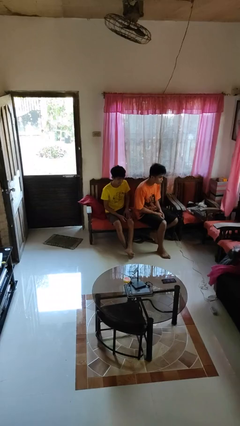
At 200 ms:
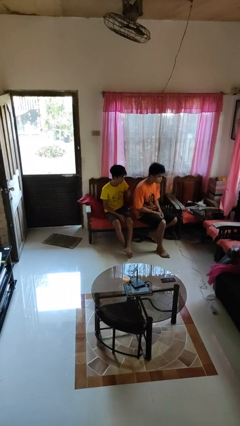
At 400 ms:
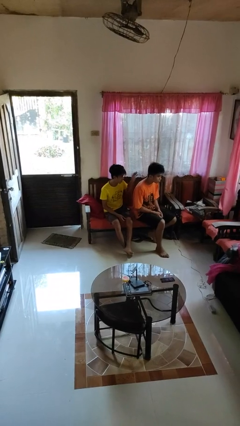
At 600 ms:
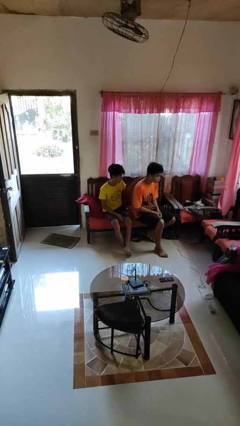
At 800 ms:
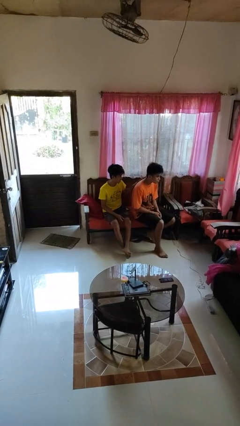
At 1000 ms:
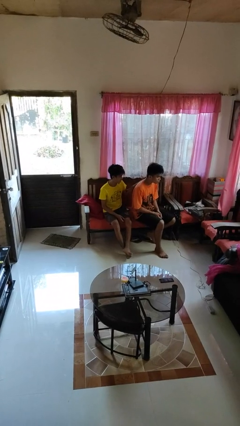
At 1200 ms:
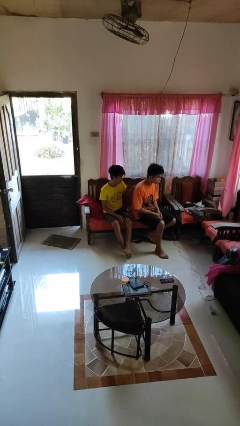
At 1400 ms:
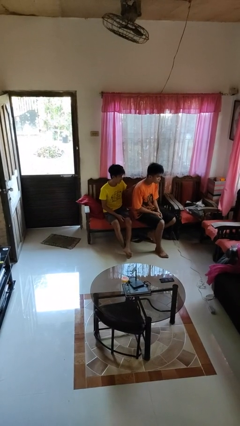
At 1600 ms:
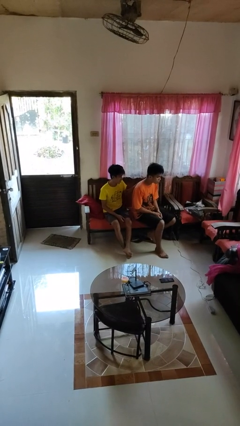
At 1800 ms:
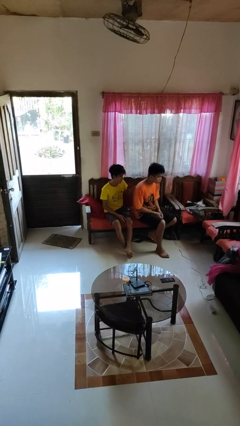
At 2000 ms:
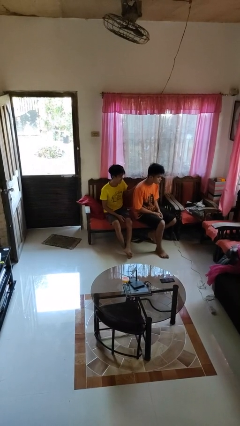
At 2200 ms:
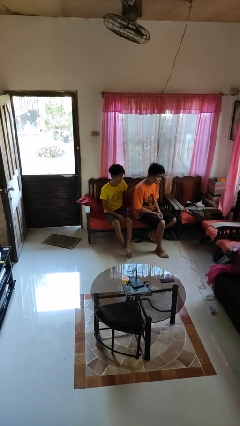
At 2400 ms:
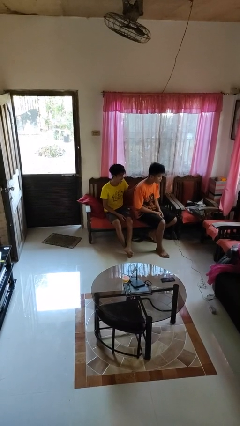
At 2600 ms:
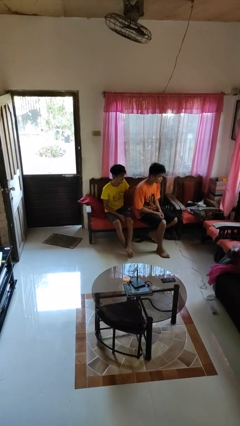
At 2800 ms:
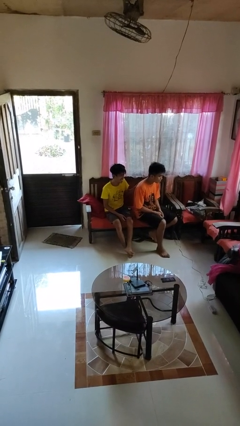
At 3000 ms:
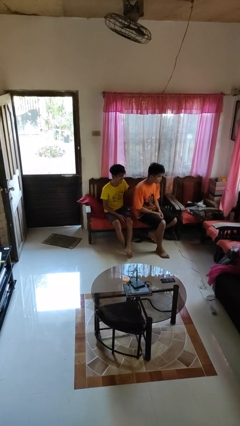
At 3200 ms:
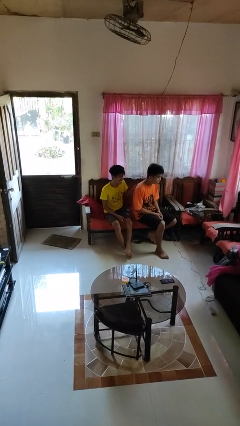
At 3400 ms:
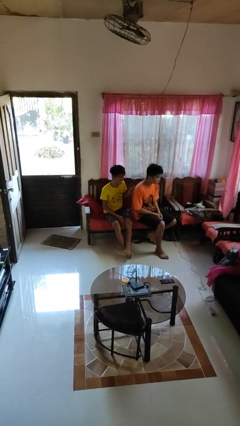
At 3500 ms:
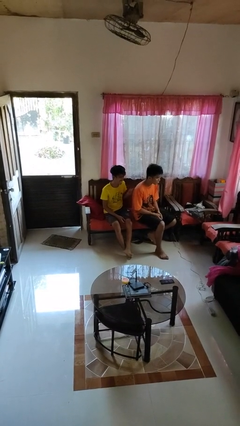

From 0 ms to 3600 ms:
person touches back of person

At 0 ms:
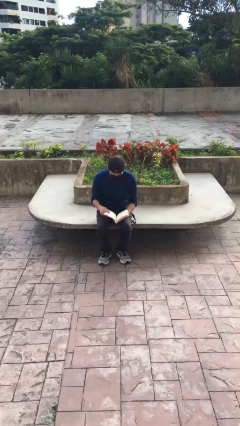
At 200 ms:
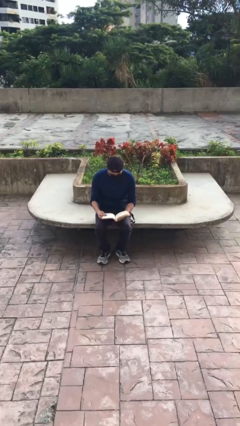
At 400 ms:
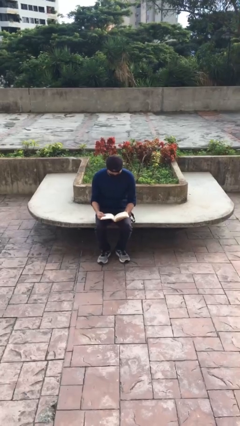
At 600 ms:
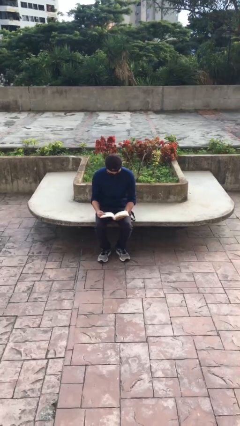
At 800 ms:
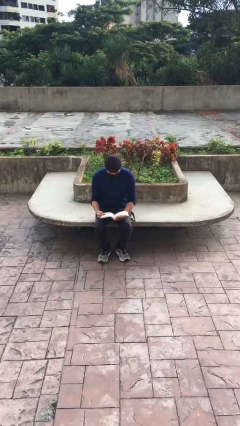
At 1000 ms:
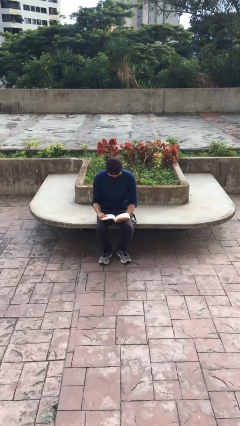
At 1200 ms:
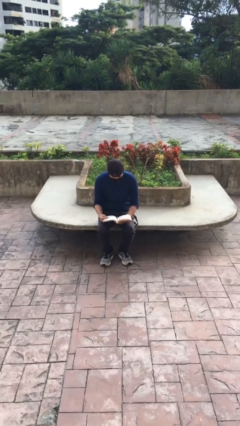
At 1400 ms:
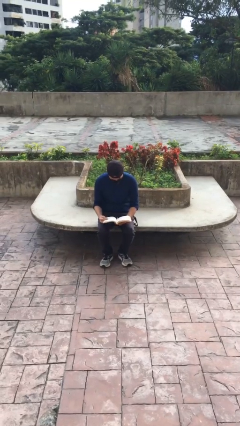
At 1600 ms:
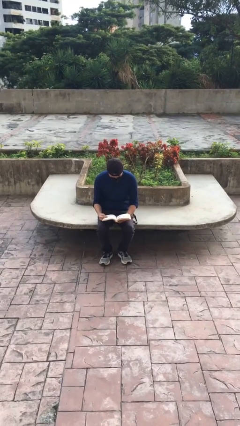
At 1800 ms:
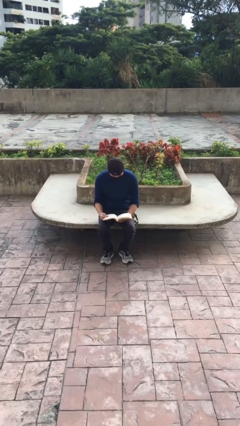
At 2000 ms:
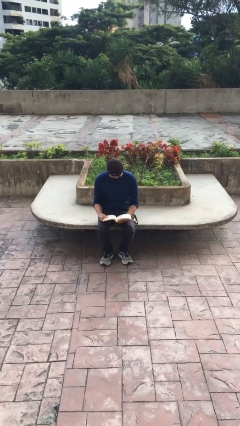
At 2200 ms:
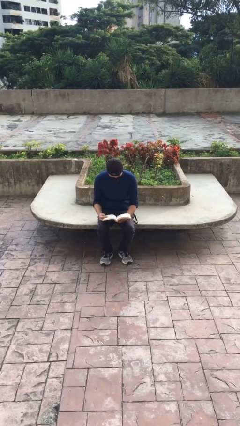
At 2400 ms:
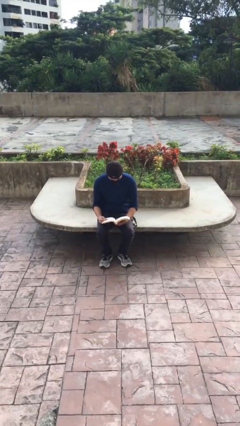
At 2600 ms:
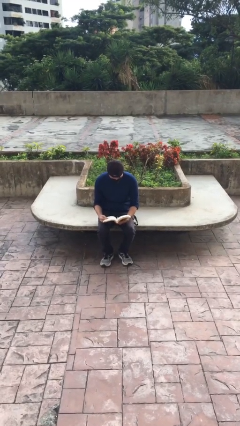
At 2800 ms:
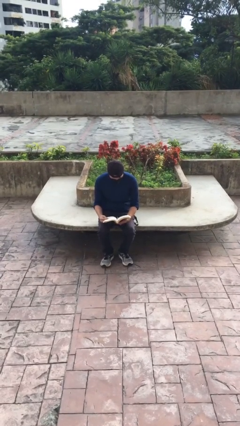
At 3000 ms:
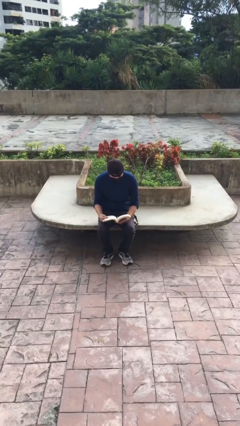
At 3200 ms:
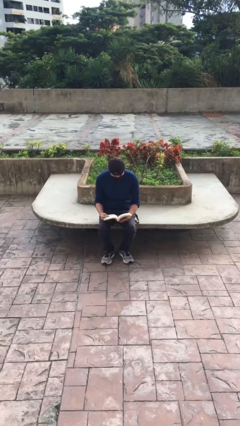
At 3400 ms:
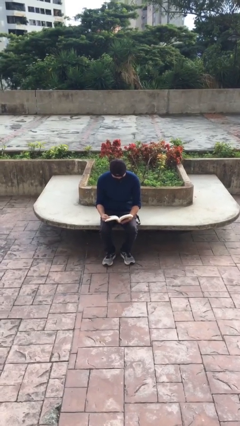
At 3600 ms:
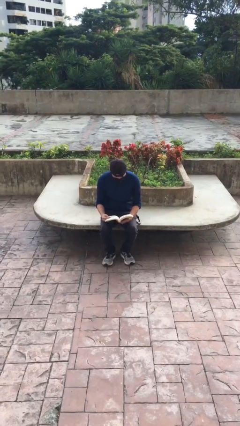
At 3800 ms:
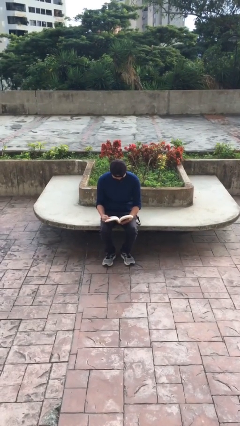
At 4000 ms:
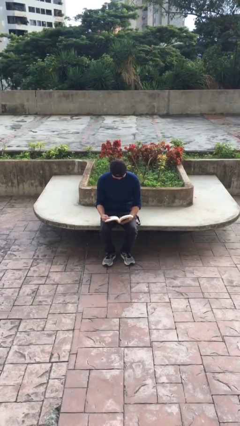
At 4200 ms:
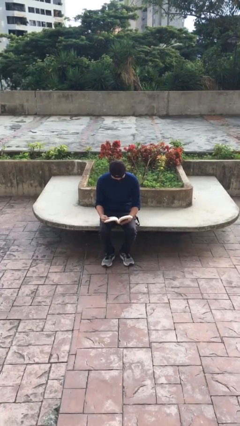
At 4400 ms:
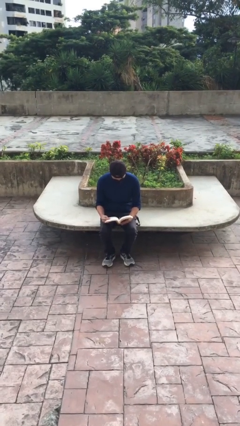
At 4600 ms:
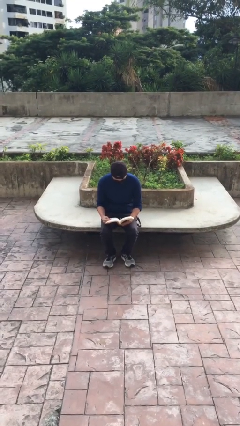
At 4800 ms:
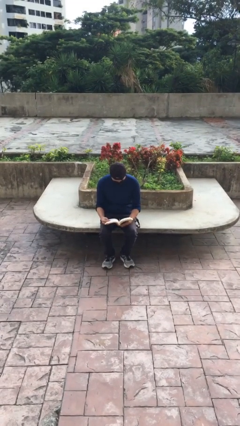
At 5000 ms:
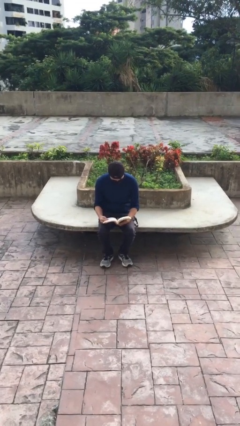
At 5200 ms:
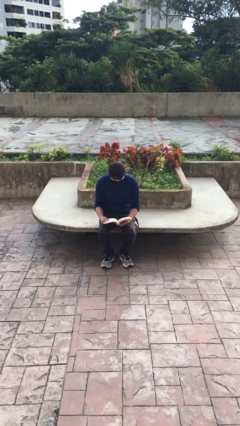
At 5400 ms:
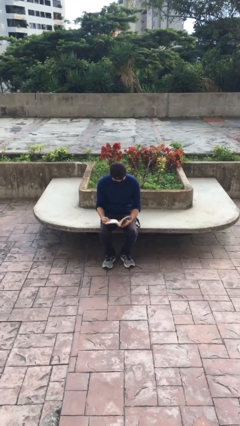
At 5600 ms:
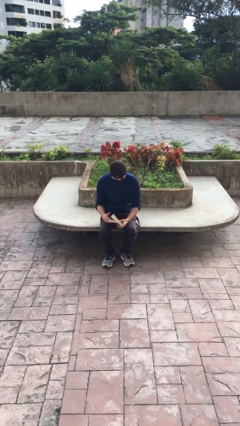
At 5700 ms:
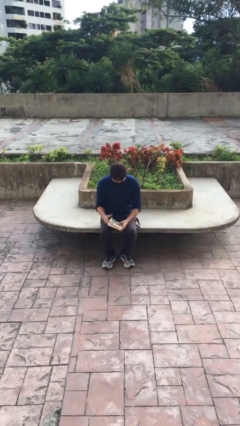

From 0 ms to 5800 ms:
person reads document

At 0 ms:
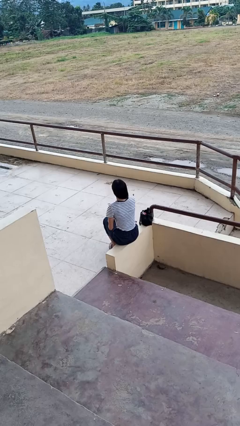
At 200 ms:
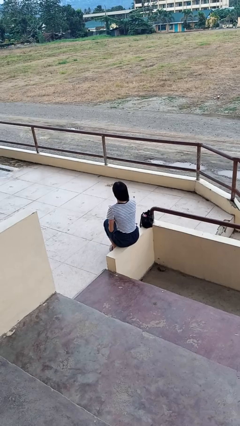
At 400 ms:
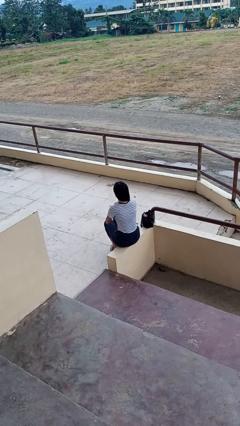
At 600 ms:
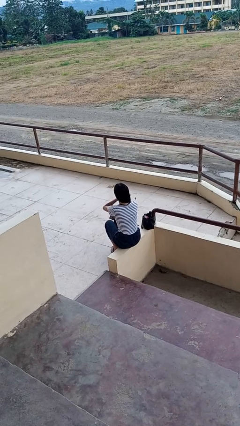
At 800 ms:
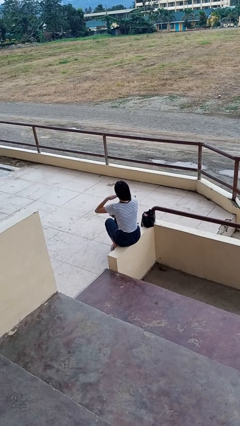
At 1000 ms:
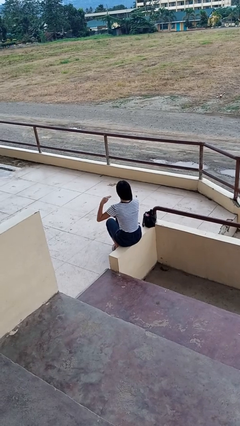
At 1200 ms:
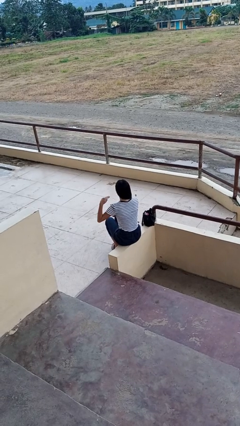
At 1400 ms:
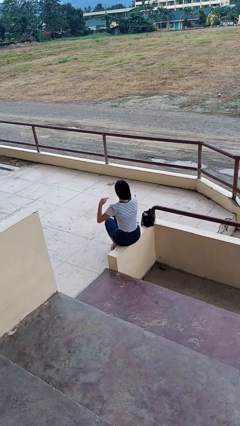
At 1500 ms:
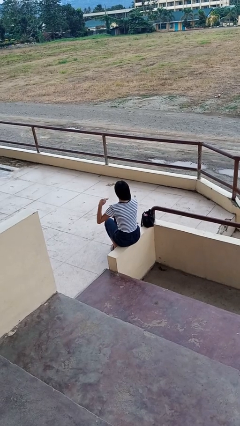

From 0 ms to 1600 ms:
person gestures cut

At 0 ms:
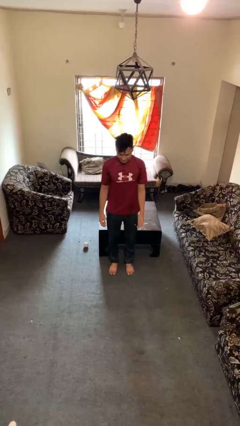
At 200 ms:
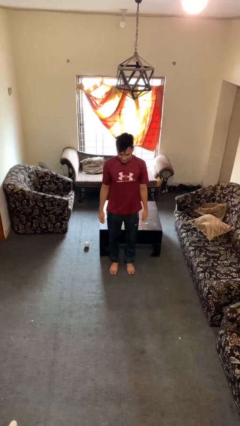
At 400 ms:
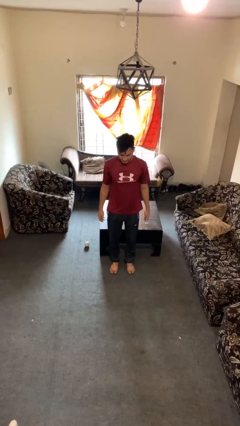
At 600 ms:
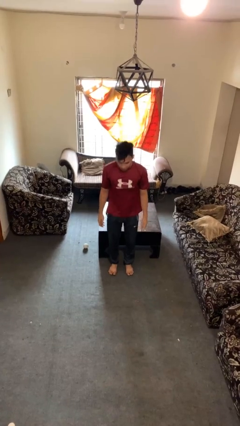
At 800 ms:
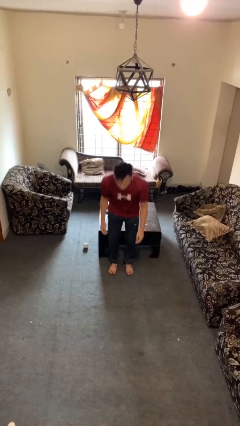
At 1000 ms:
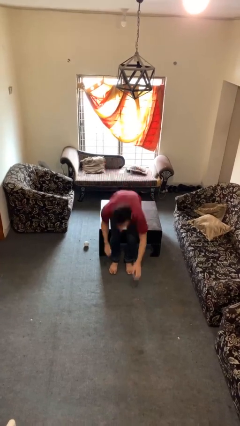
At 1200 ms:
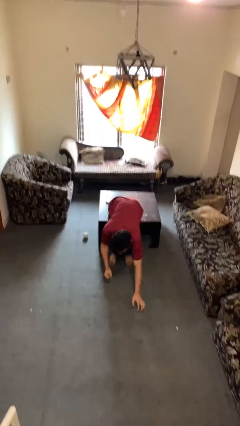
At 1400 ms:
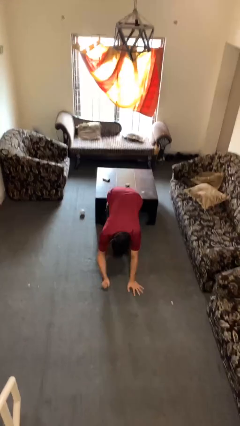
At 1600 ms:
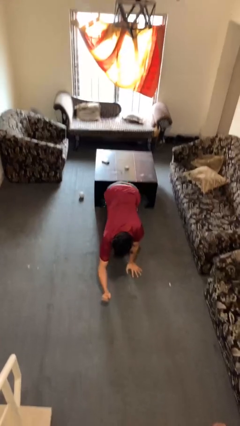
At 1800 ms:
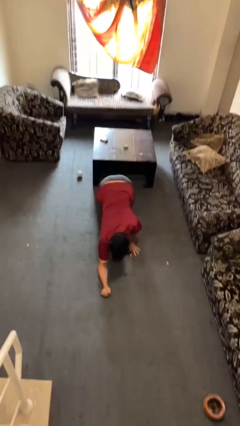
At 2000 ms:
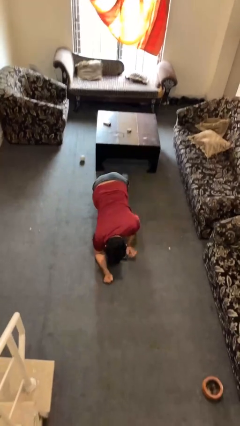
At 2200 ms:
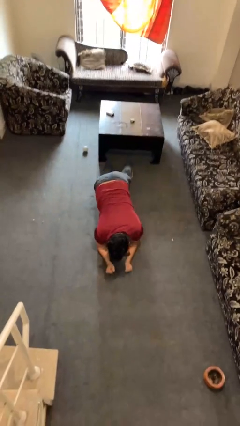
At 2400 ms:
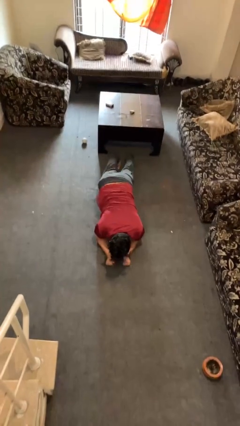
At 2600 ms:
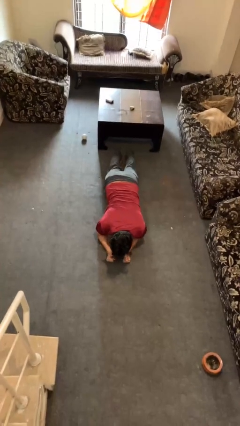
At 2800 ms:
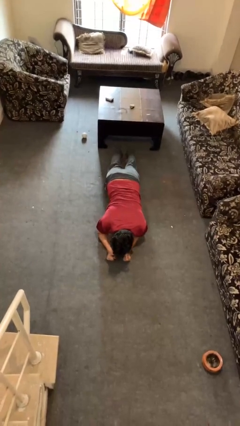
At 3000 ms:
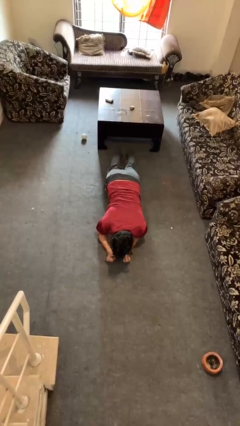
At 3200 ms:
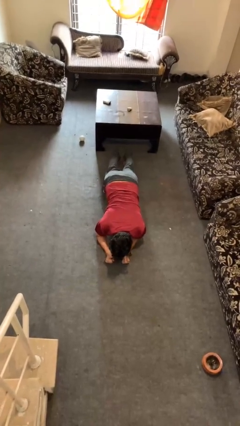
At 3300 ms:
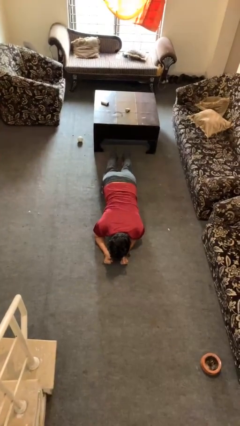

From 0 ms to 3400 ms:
person exercises with plank

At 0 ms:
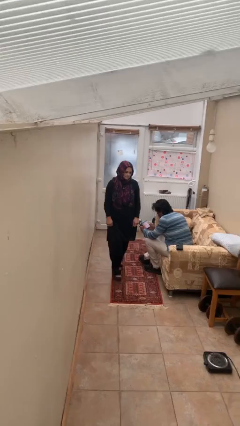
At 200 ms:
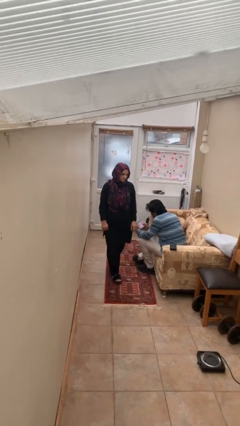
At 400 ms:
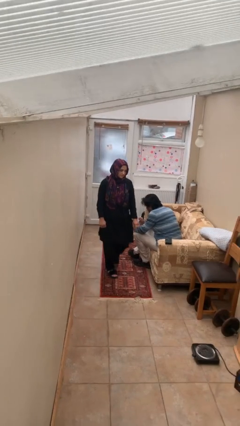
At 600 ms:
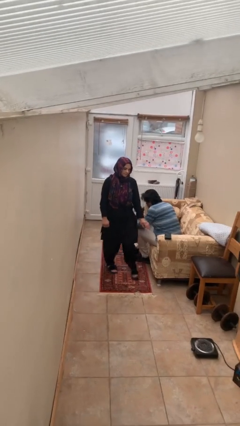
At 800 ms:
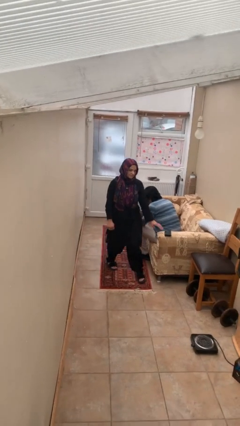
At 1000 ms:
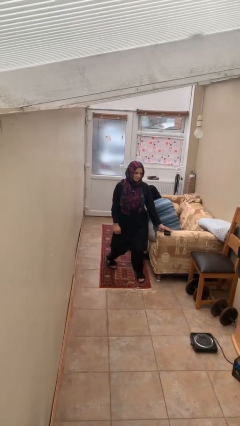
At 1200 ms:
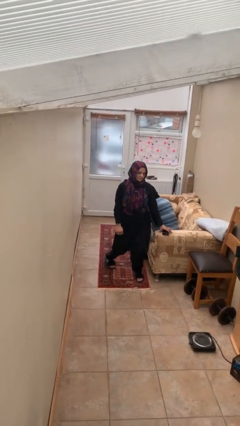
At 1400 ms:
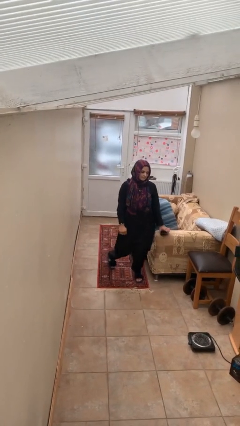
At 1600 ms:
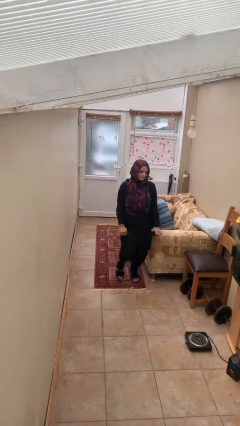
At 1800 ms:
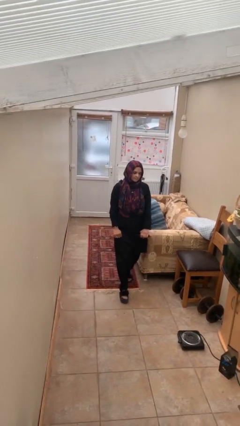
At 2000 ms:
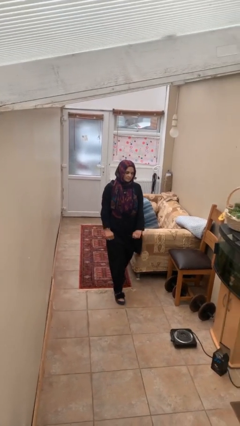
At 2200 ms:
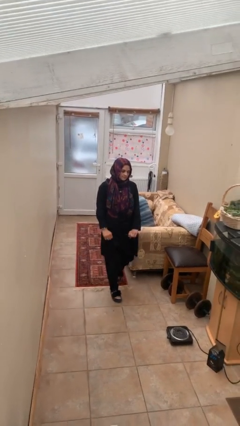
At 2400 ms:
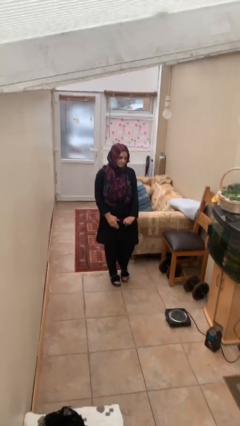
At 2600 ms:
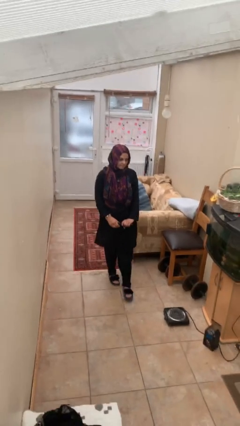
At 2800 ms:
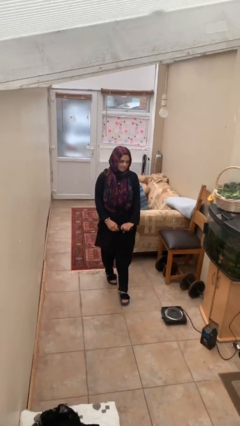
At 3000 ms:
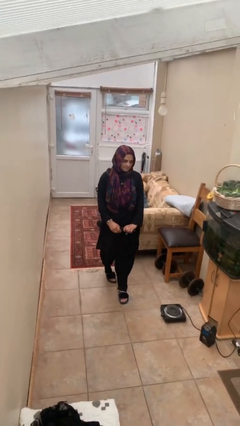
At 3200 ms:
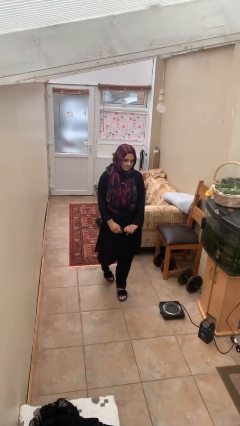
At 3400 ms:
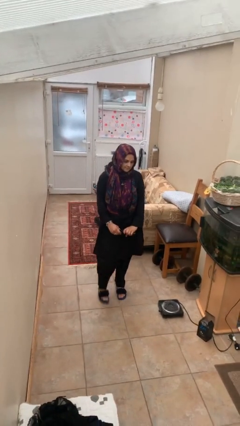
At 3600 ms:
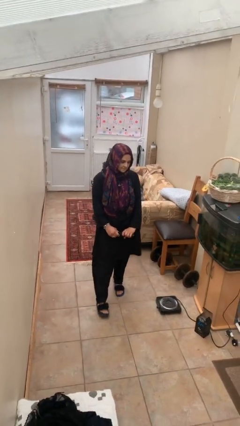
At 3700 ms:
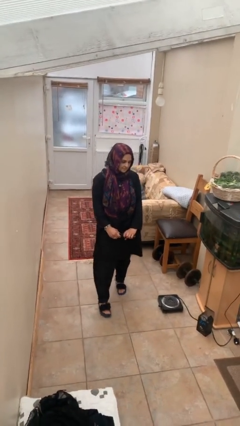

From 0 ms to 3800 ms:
person steals object from person
